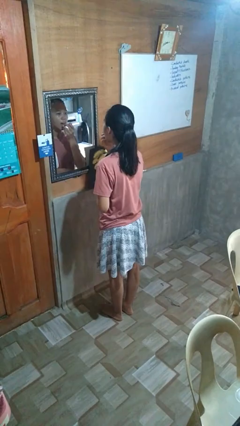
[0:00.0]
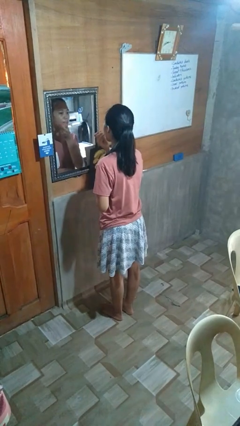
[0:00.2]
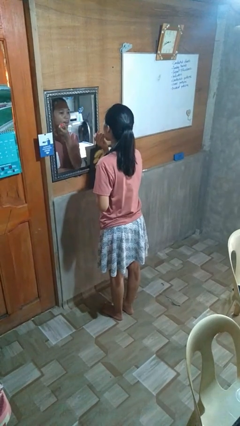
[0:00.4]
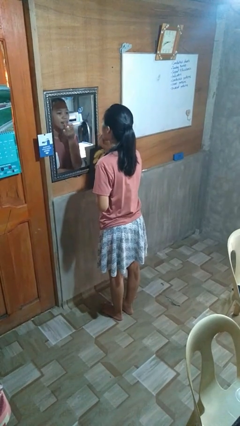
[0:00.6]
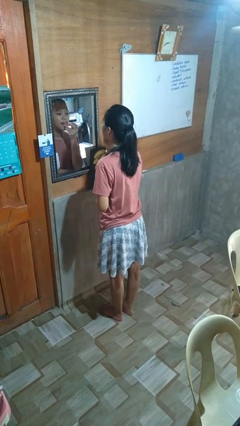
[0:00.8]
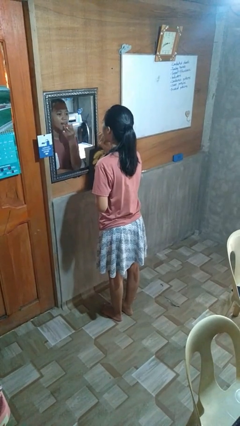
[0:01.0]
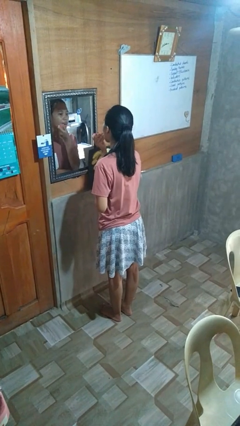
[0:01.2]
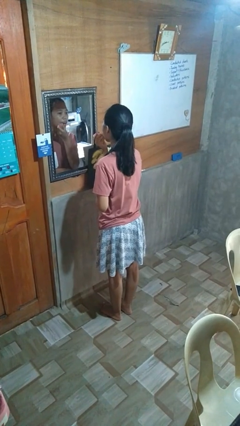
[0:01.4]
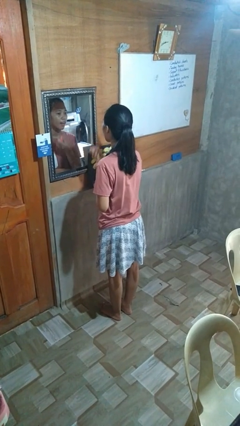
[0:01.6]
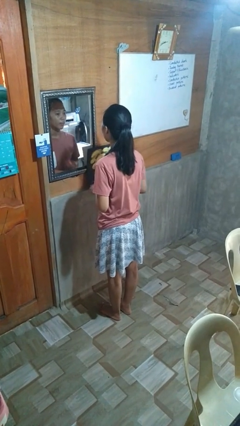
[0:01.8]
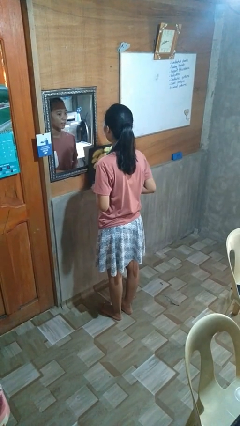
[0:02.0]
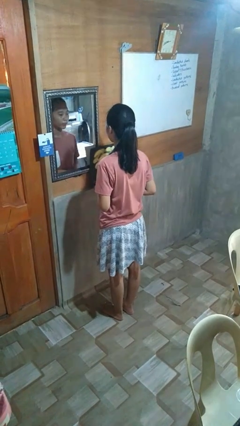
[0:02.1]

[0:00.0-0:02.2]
person applies lip makeup

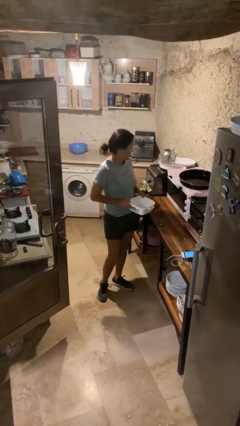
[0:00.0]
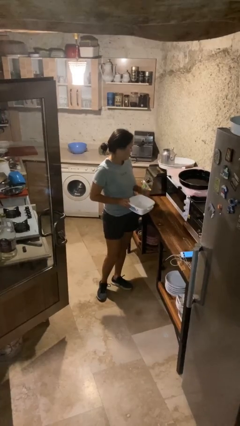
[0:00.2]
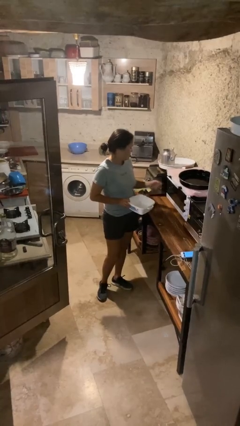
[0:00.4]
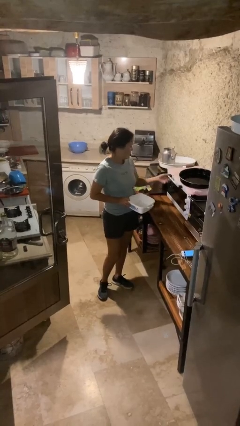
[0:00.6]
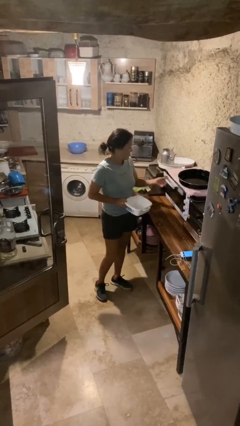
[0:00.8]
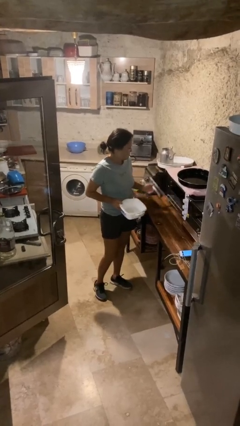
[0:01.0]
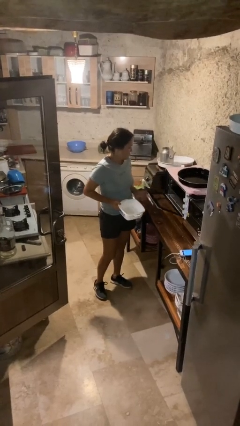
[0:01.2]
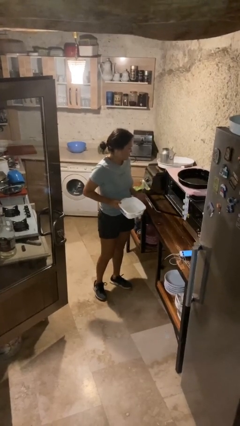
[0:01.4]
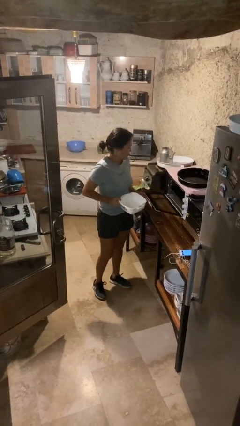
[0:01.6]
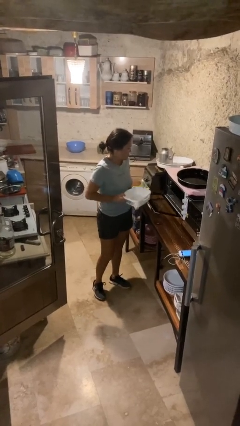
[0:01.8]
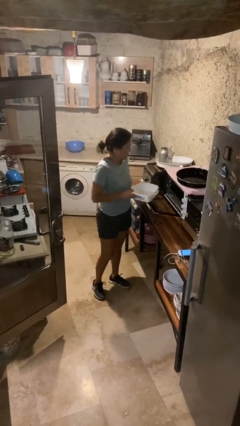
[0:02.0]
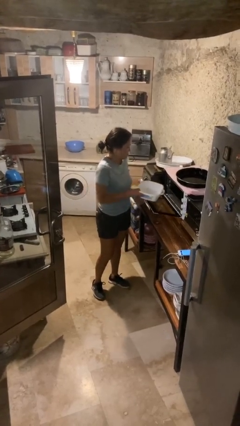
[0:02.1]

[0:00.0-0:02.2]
person opens microwave

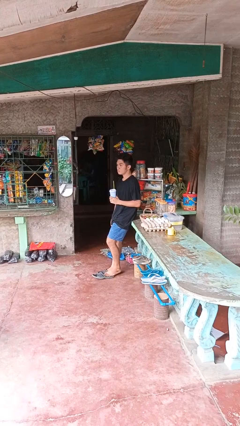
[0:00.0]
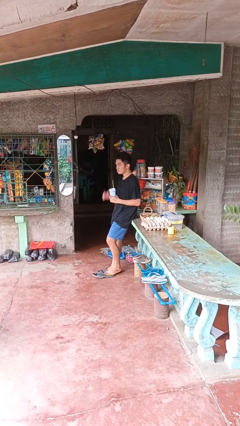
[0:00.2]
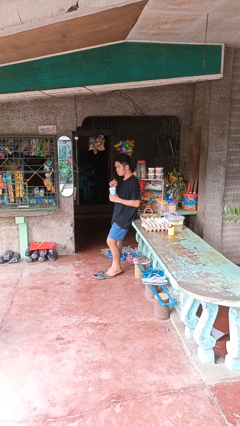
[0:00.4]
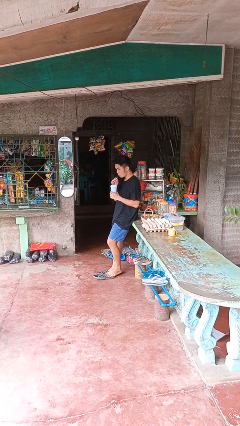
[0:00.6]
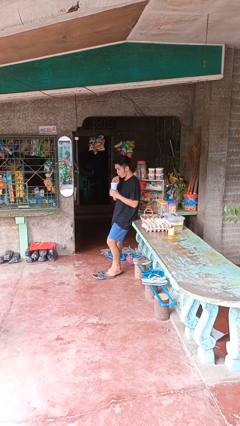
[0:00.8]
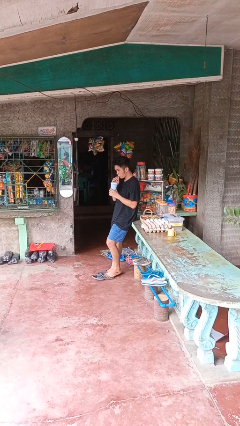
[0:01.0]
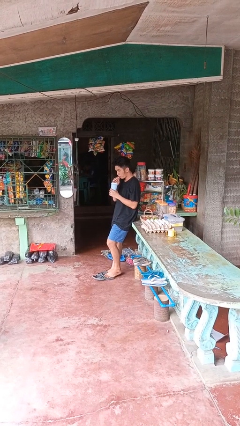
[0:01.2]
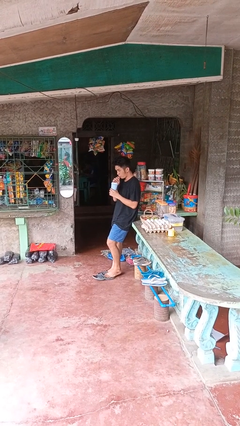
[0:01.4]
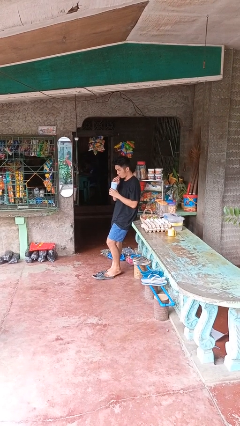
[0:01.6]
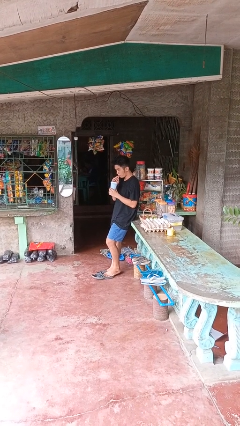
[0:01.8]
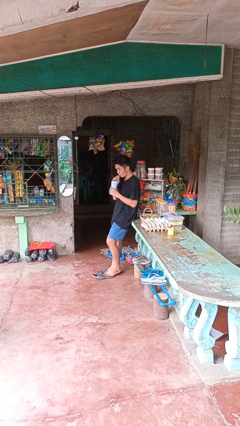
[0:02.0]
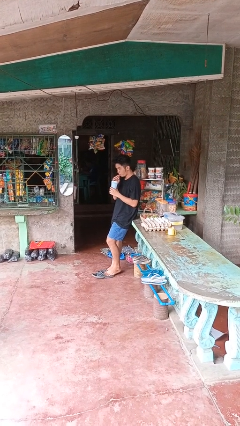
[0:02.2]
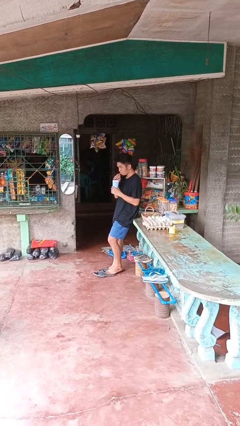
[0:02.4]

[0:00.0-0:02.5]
person drinks from straw

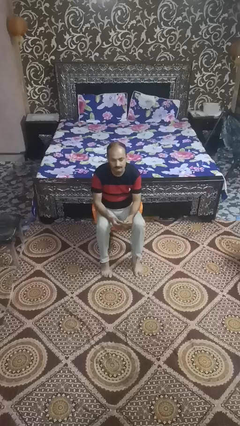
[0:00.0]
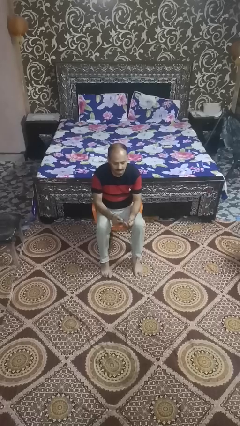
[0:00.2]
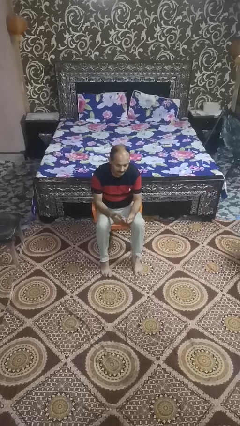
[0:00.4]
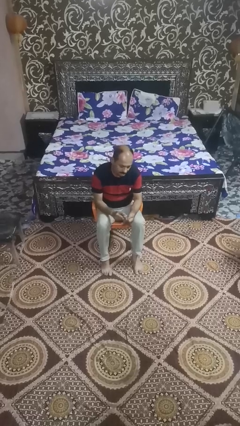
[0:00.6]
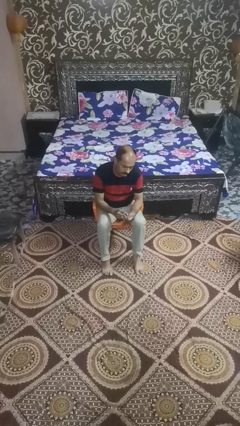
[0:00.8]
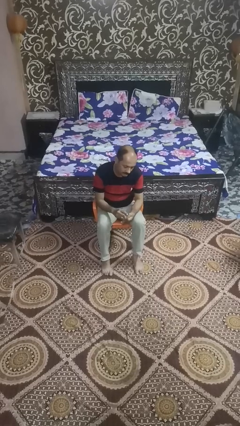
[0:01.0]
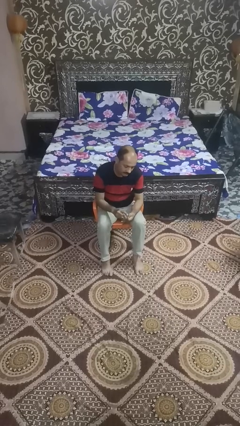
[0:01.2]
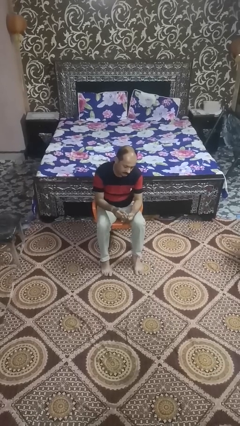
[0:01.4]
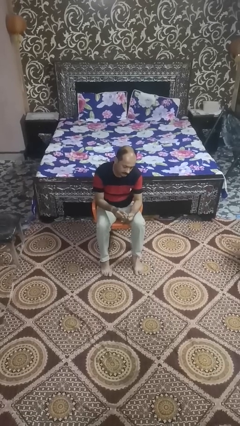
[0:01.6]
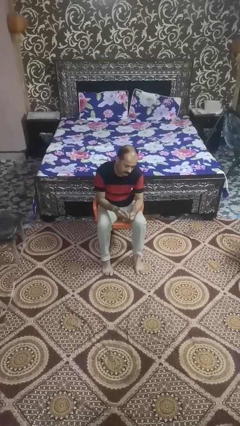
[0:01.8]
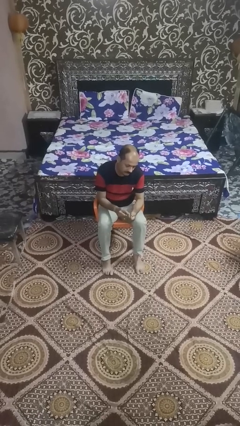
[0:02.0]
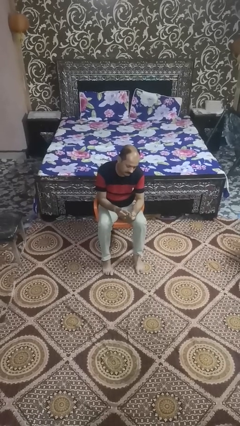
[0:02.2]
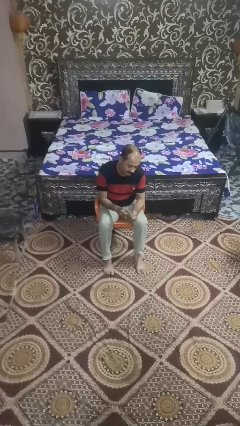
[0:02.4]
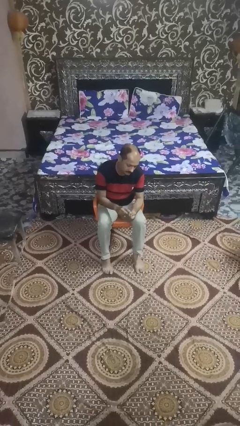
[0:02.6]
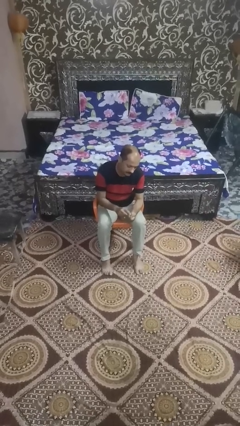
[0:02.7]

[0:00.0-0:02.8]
person files fingernails

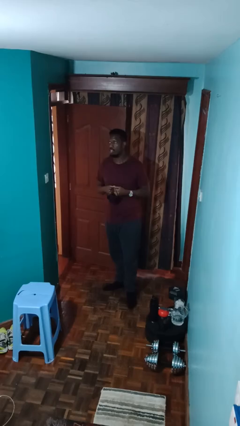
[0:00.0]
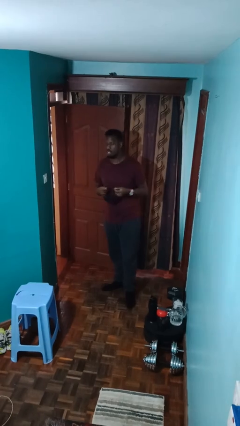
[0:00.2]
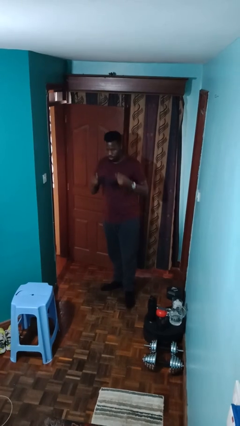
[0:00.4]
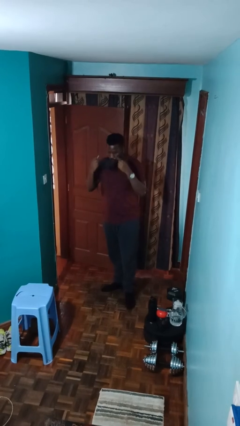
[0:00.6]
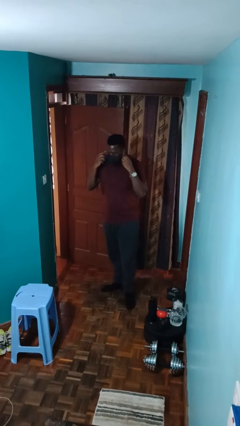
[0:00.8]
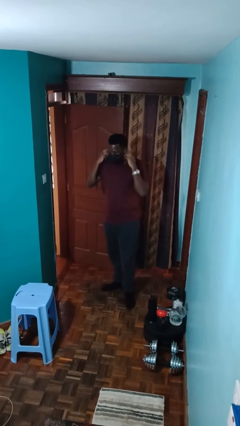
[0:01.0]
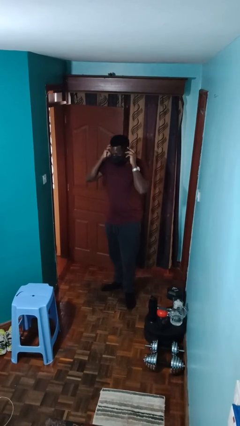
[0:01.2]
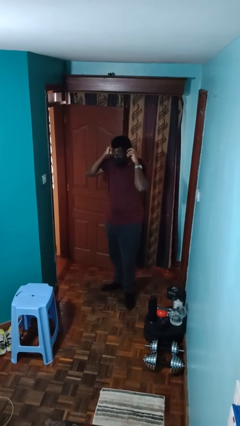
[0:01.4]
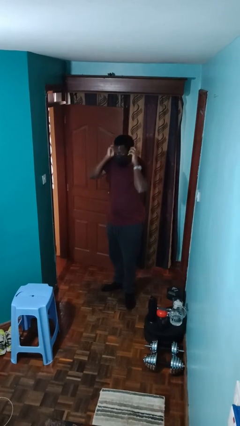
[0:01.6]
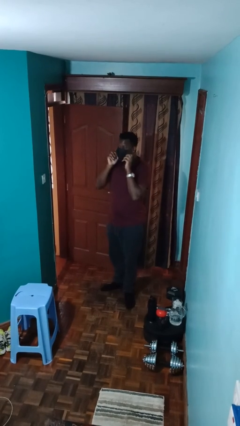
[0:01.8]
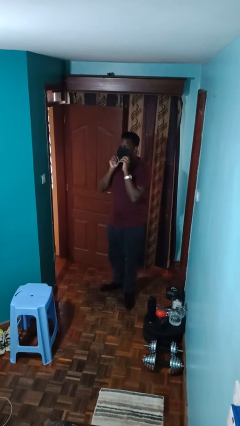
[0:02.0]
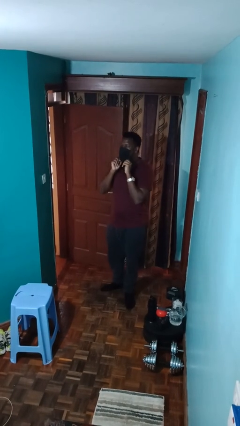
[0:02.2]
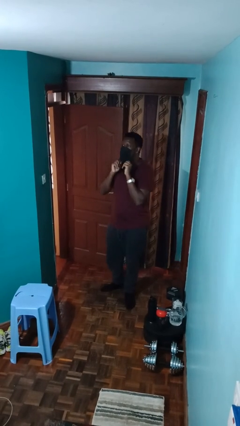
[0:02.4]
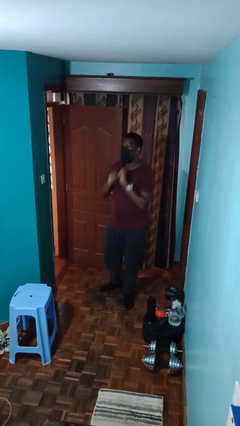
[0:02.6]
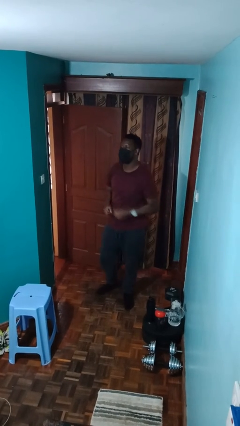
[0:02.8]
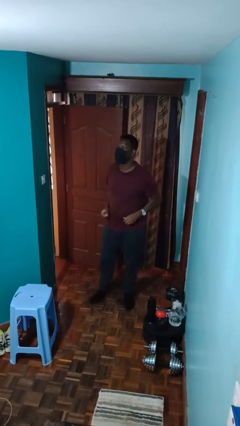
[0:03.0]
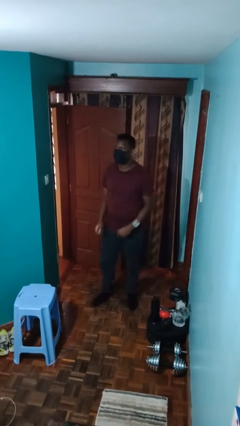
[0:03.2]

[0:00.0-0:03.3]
person puts on facemask

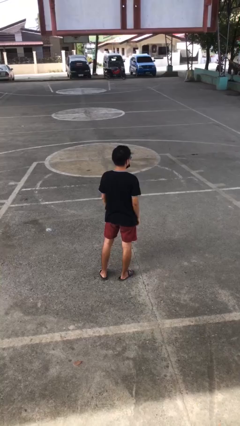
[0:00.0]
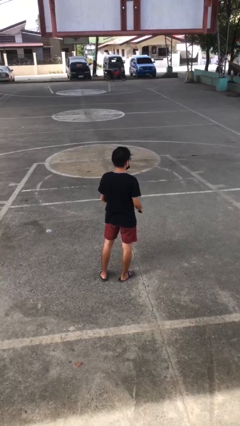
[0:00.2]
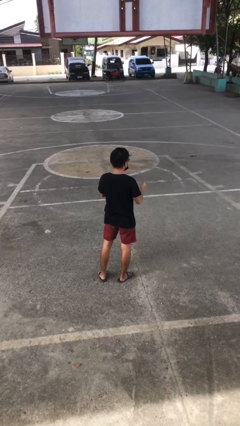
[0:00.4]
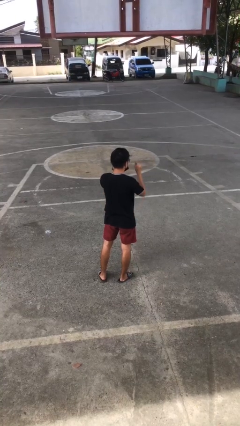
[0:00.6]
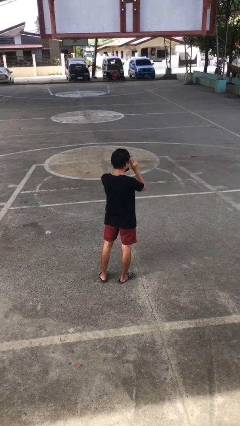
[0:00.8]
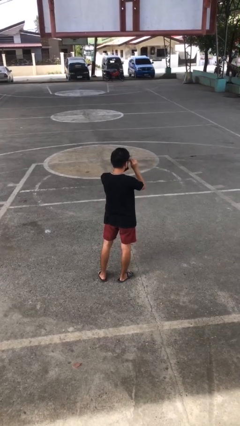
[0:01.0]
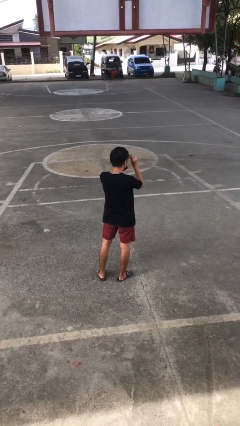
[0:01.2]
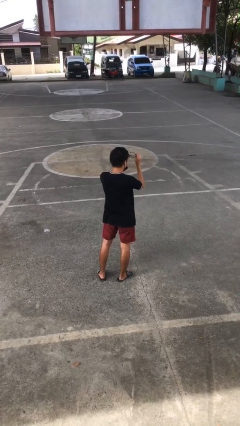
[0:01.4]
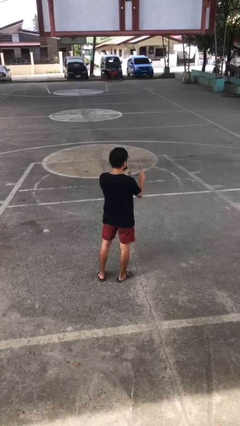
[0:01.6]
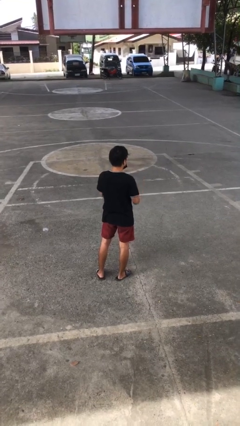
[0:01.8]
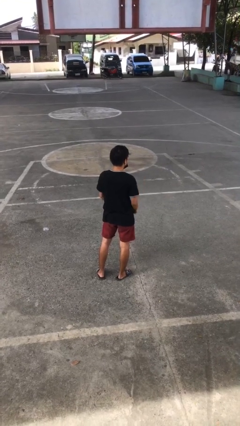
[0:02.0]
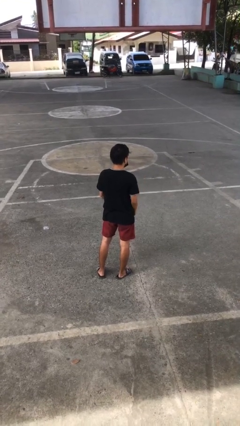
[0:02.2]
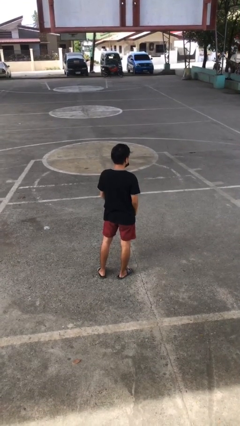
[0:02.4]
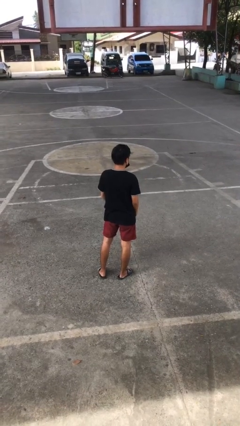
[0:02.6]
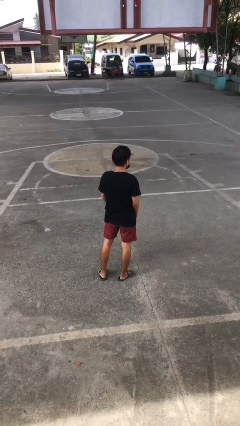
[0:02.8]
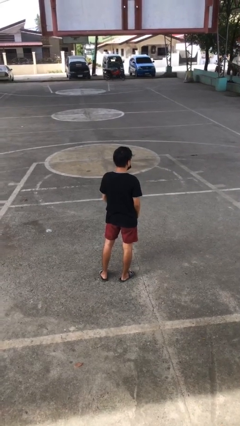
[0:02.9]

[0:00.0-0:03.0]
person takes off glasses

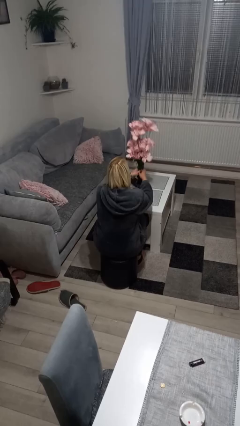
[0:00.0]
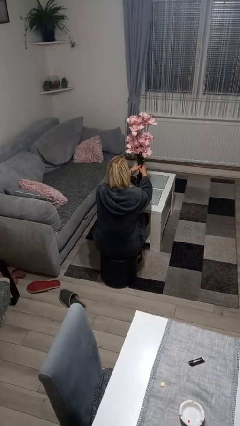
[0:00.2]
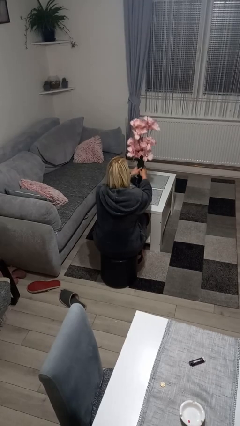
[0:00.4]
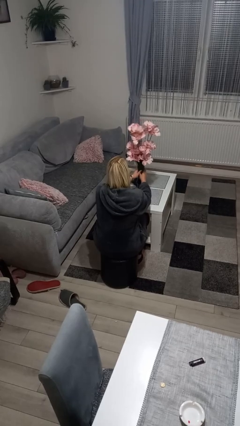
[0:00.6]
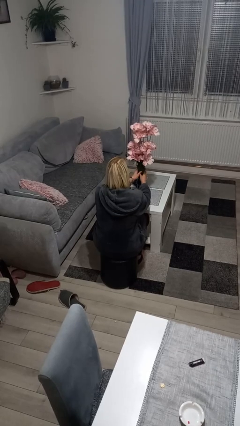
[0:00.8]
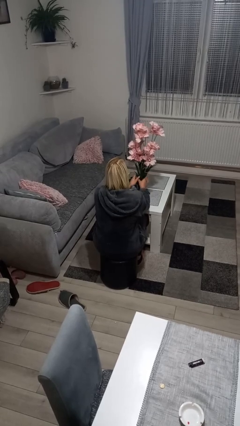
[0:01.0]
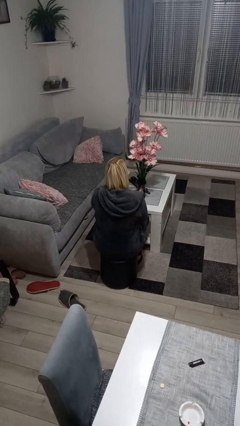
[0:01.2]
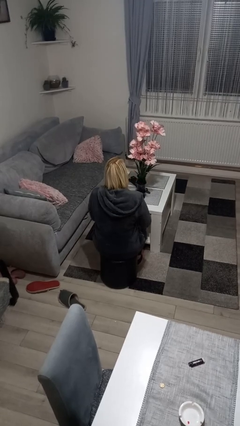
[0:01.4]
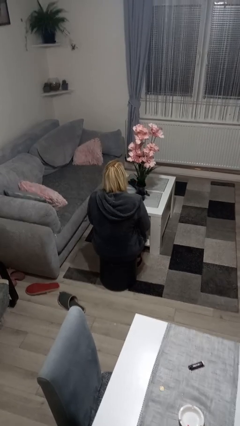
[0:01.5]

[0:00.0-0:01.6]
person arranges flowers in vase
